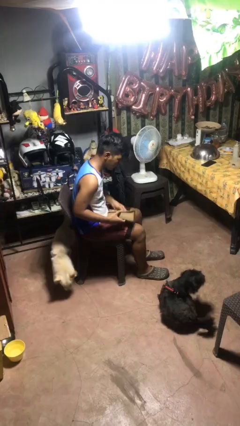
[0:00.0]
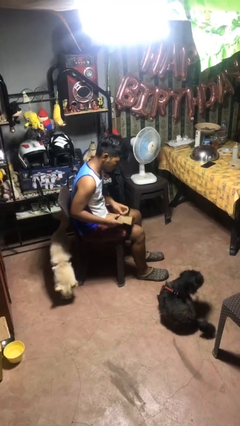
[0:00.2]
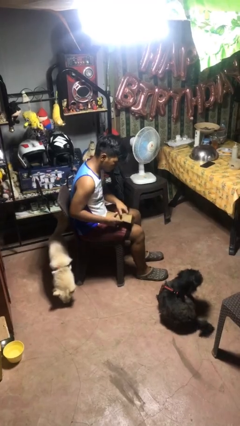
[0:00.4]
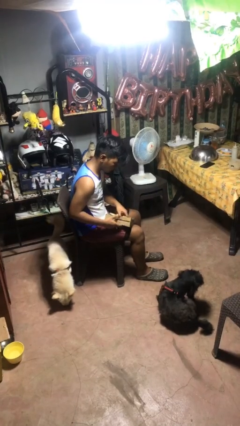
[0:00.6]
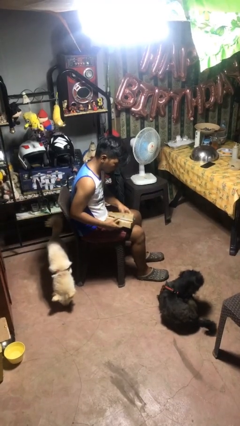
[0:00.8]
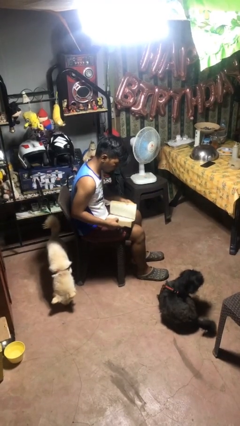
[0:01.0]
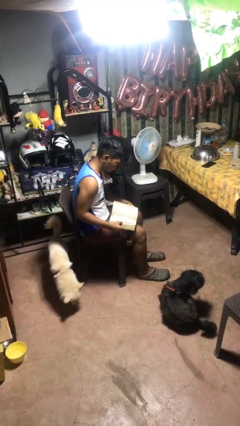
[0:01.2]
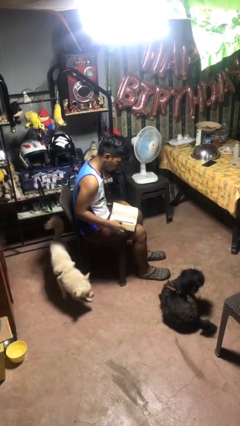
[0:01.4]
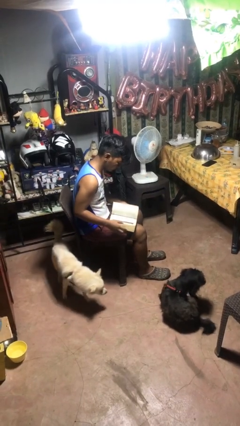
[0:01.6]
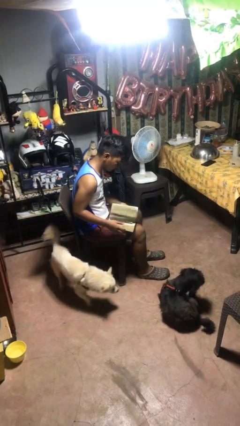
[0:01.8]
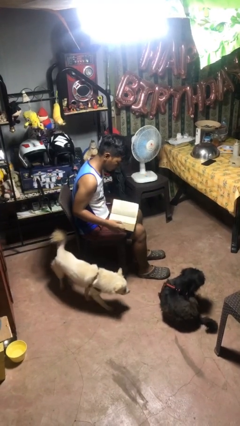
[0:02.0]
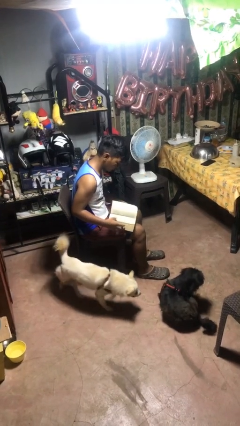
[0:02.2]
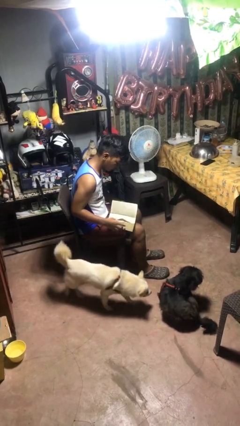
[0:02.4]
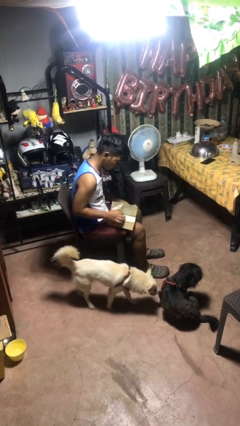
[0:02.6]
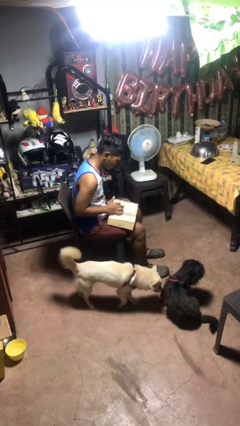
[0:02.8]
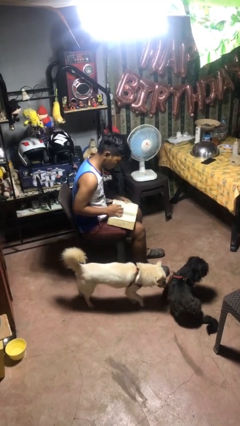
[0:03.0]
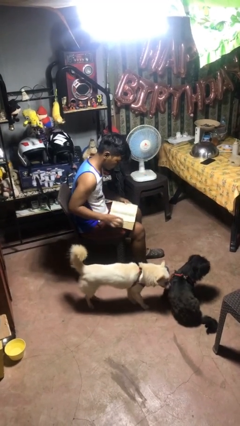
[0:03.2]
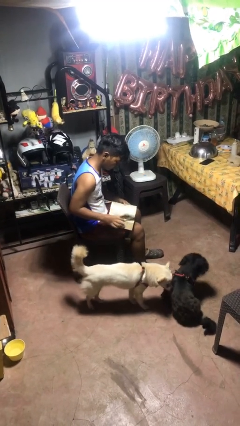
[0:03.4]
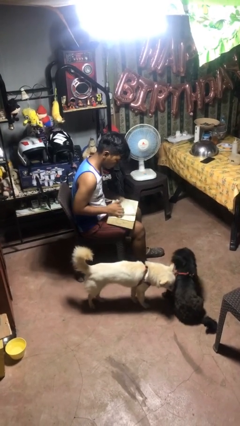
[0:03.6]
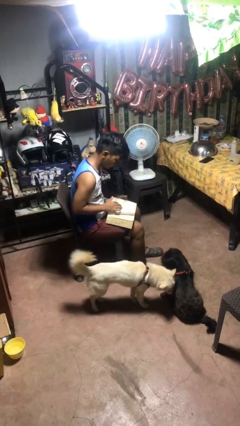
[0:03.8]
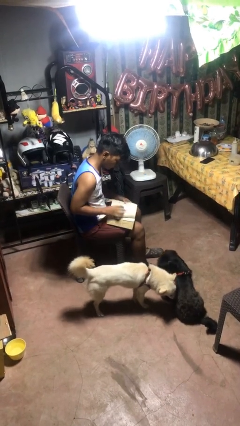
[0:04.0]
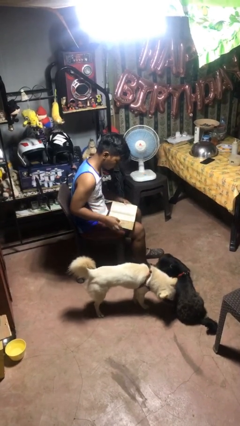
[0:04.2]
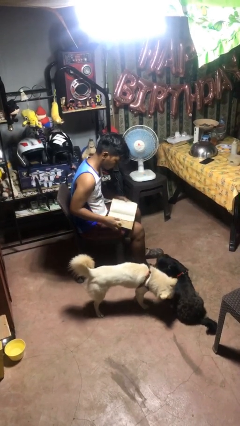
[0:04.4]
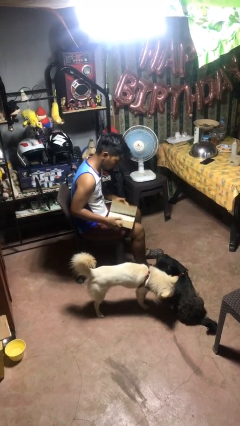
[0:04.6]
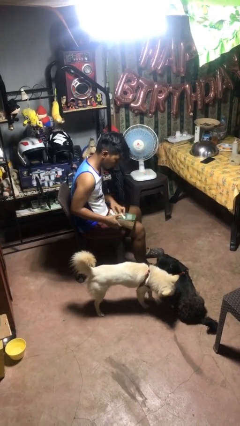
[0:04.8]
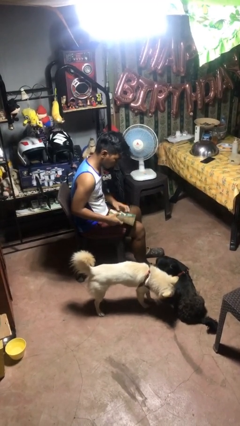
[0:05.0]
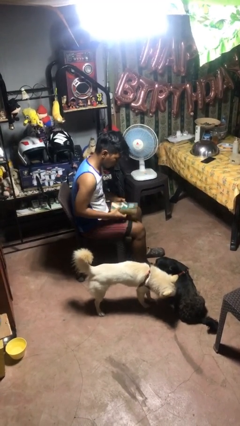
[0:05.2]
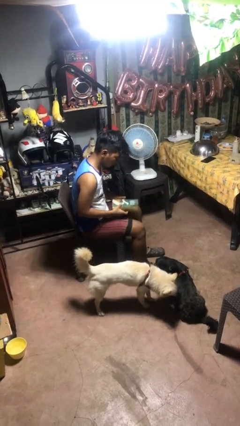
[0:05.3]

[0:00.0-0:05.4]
person reads book

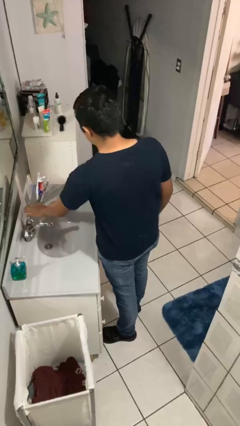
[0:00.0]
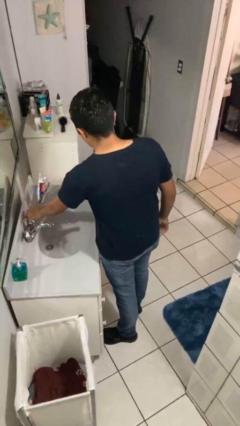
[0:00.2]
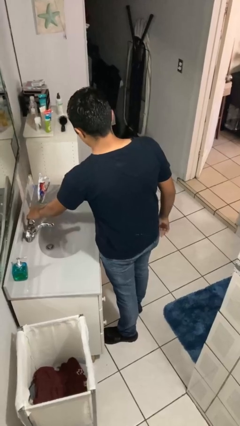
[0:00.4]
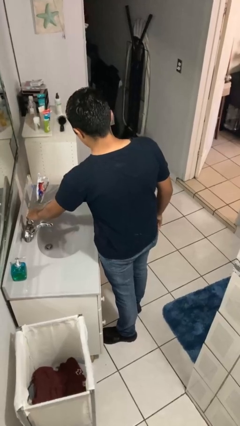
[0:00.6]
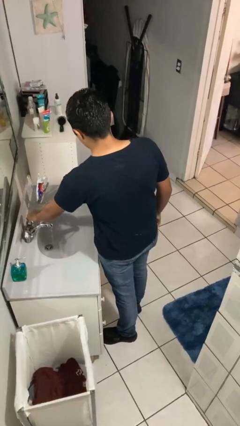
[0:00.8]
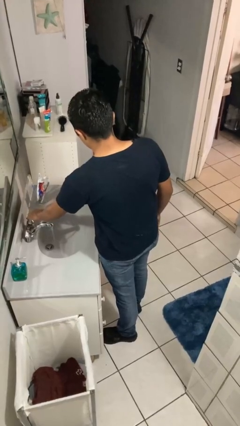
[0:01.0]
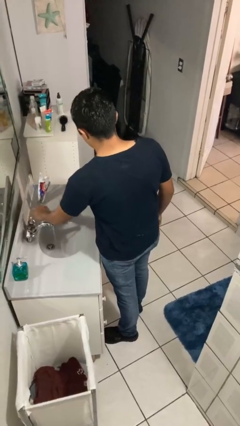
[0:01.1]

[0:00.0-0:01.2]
person turns on faucet

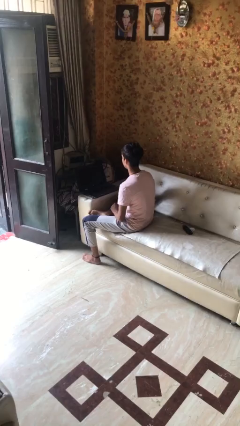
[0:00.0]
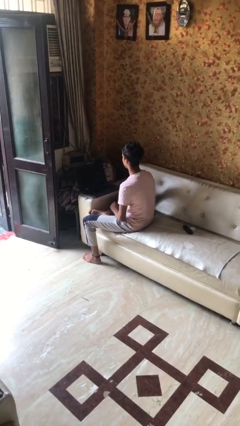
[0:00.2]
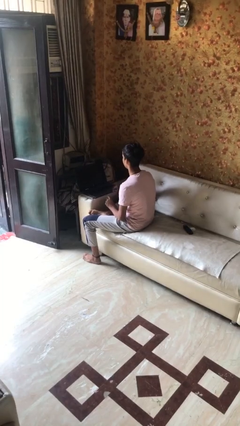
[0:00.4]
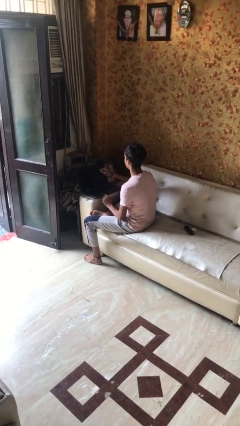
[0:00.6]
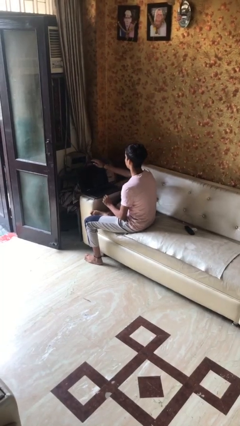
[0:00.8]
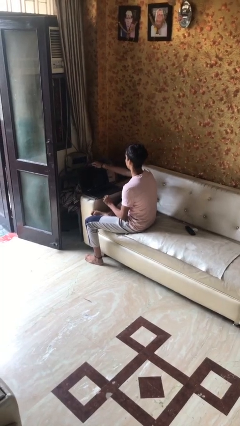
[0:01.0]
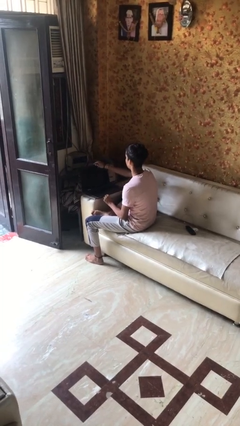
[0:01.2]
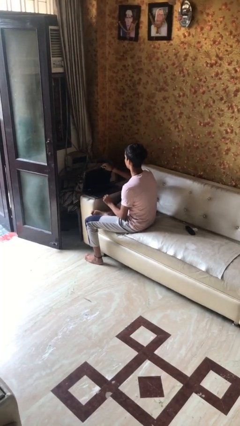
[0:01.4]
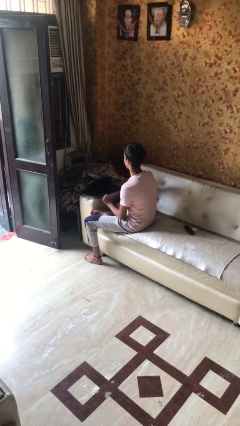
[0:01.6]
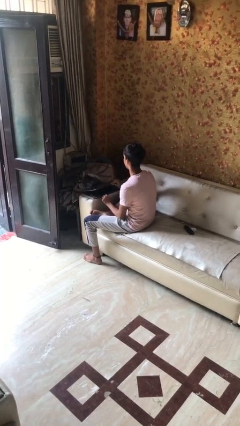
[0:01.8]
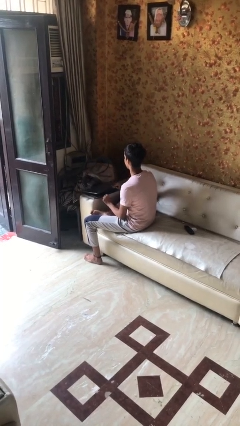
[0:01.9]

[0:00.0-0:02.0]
person closes laptop

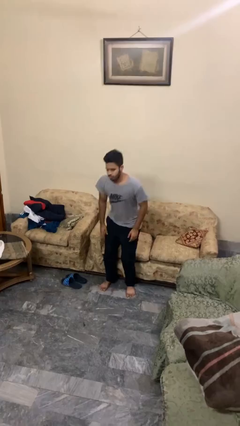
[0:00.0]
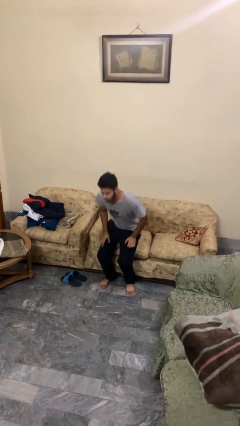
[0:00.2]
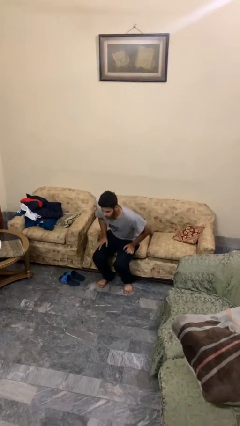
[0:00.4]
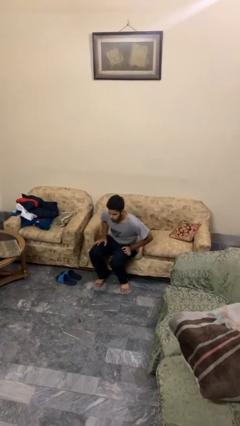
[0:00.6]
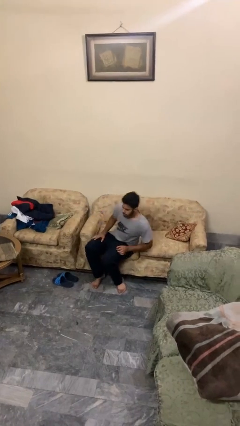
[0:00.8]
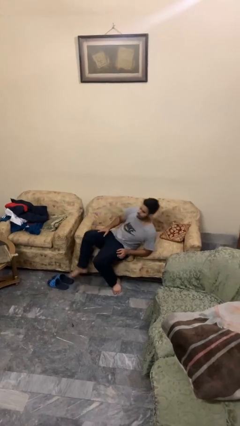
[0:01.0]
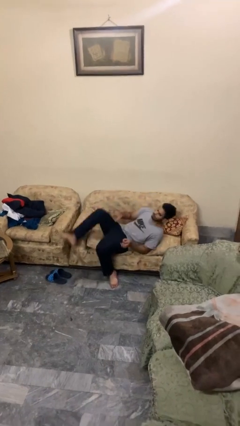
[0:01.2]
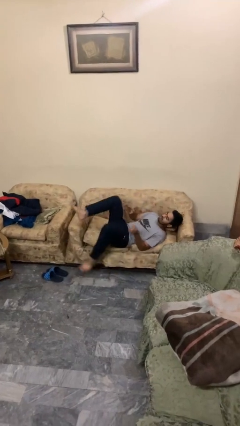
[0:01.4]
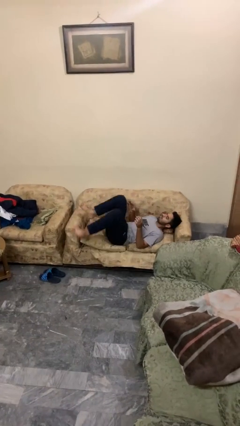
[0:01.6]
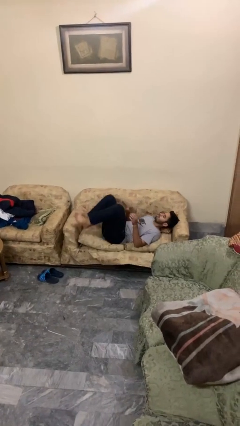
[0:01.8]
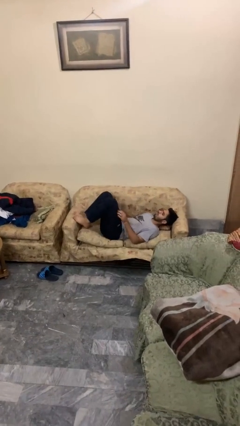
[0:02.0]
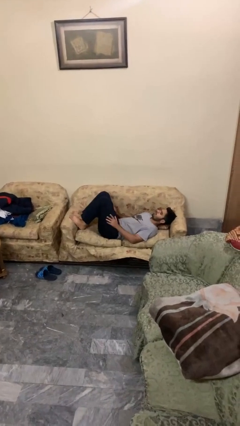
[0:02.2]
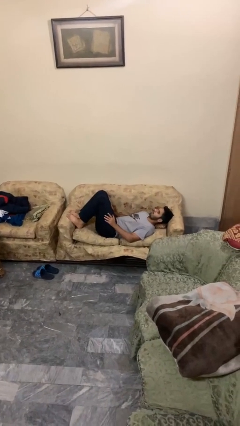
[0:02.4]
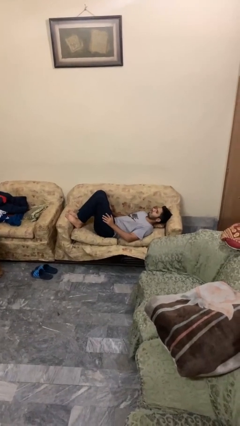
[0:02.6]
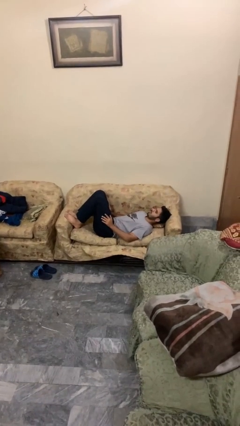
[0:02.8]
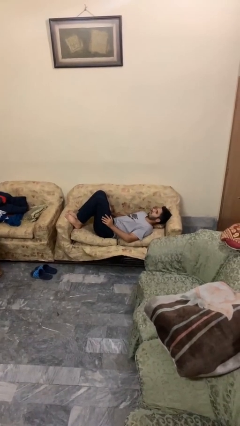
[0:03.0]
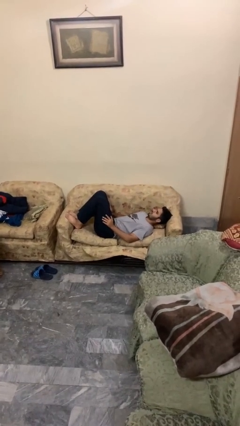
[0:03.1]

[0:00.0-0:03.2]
person lies down on couch

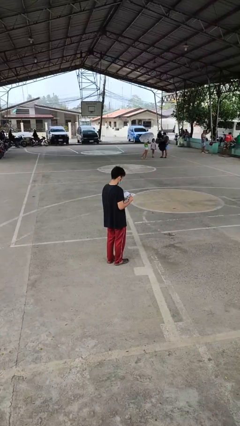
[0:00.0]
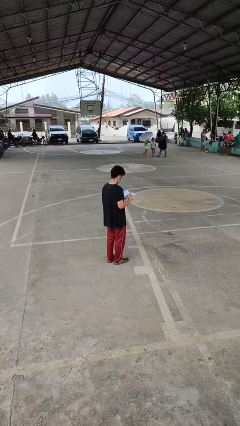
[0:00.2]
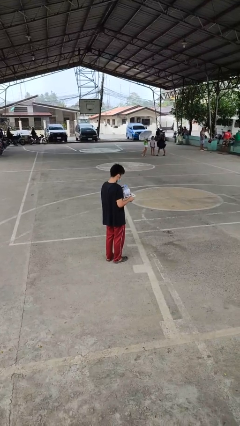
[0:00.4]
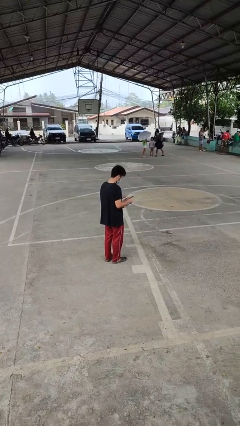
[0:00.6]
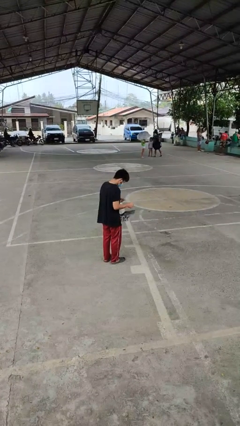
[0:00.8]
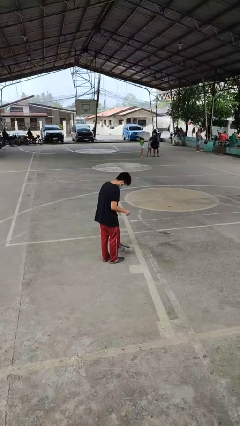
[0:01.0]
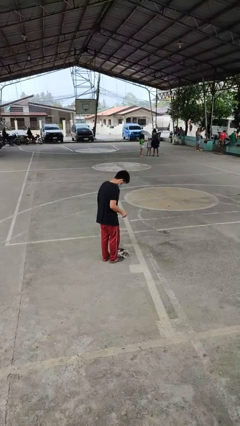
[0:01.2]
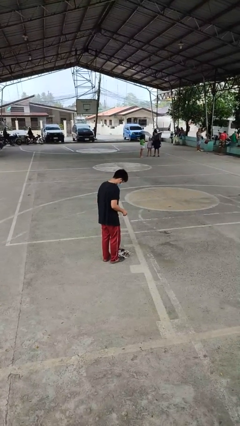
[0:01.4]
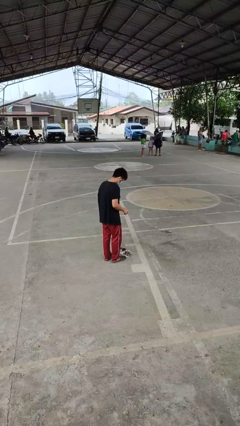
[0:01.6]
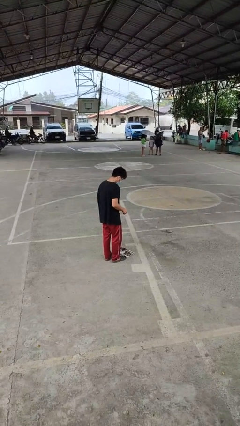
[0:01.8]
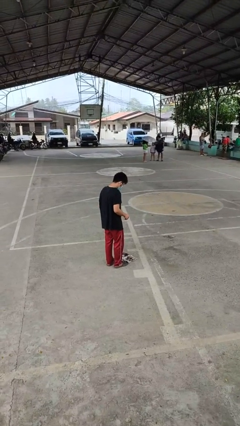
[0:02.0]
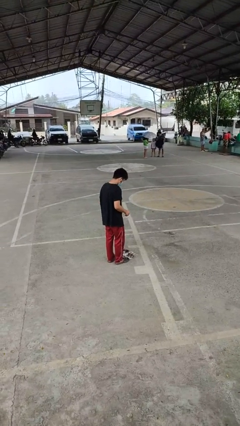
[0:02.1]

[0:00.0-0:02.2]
person drops object

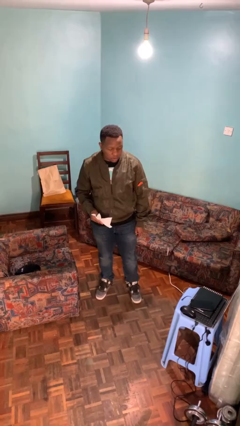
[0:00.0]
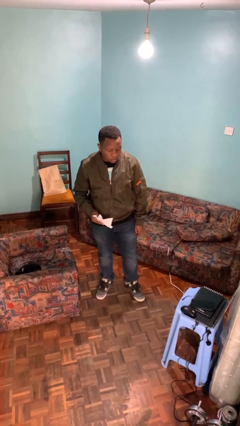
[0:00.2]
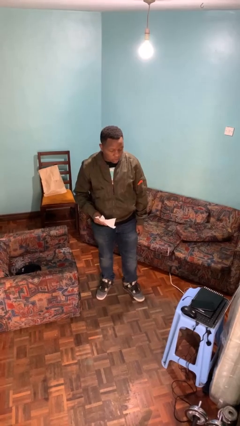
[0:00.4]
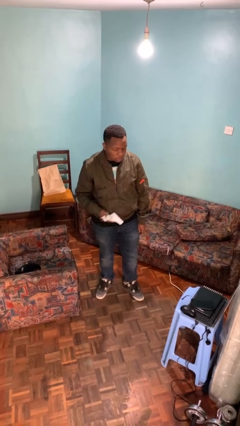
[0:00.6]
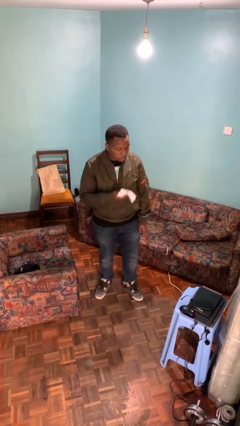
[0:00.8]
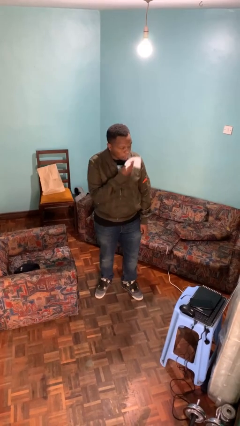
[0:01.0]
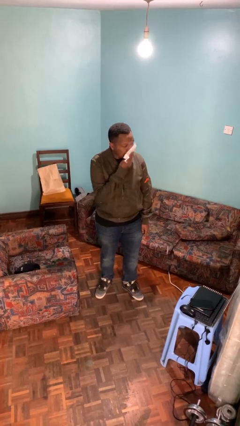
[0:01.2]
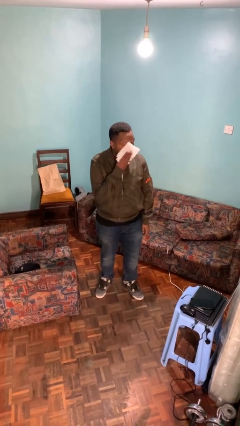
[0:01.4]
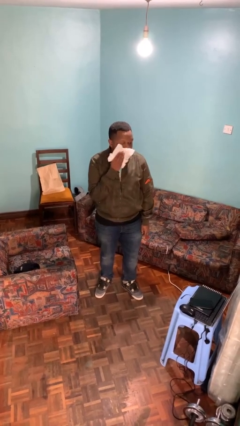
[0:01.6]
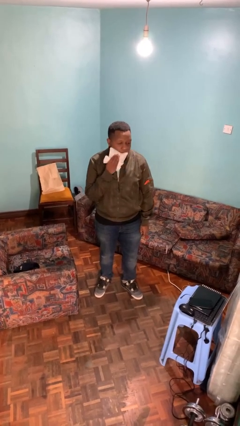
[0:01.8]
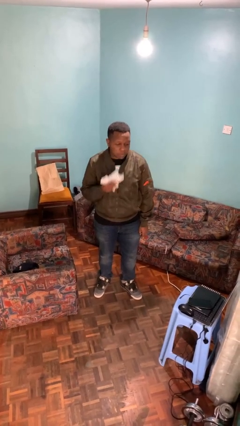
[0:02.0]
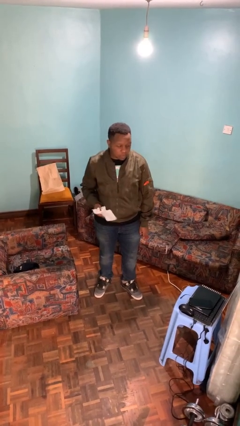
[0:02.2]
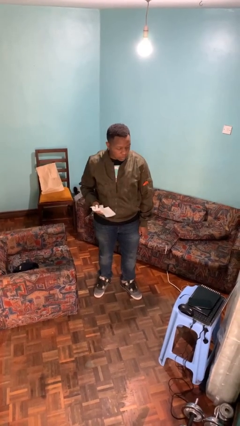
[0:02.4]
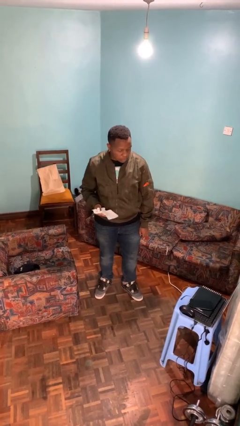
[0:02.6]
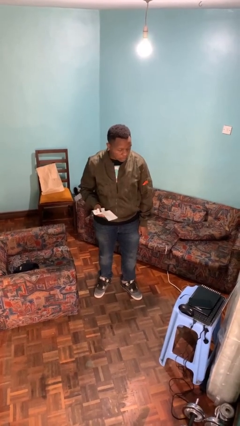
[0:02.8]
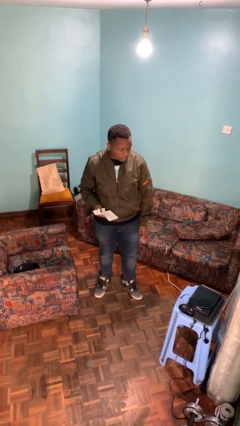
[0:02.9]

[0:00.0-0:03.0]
person wipes mouth with napkin
